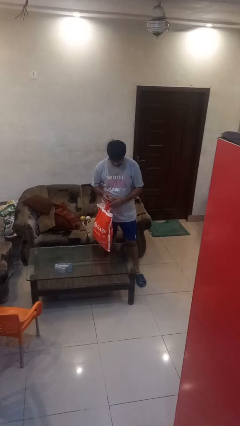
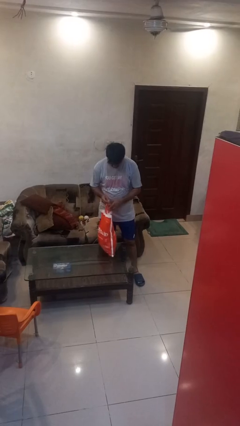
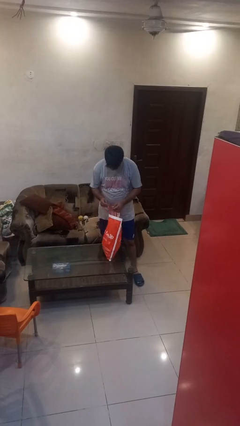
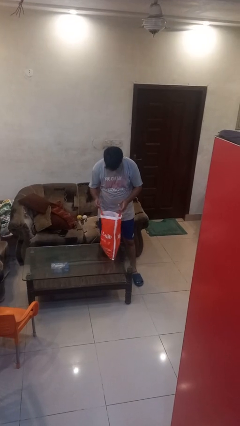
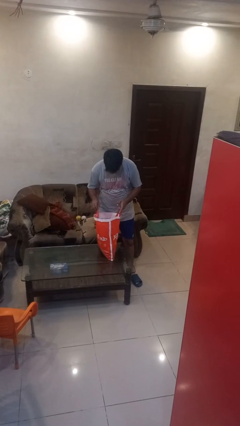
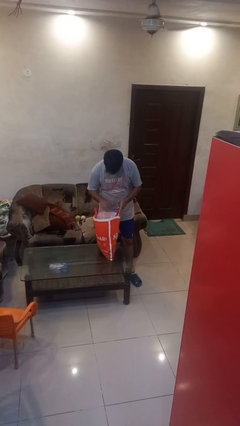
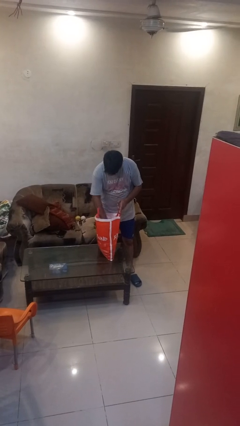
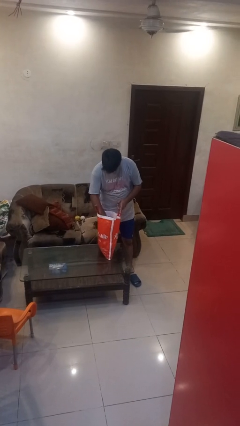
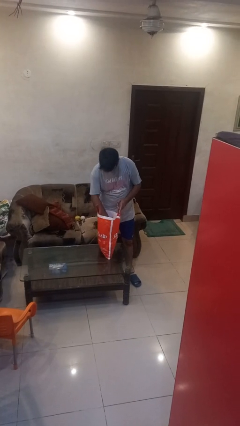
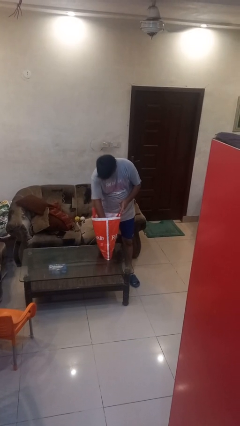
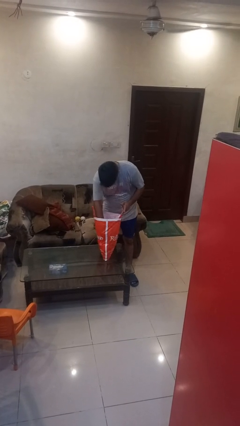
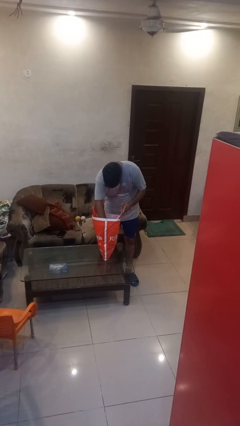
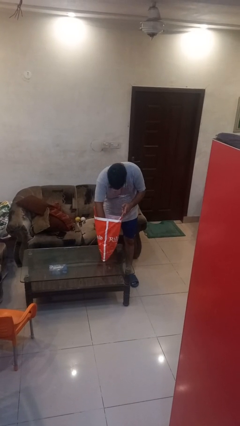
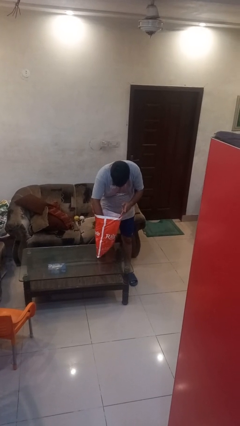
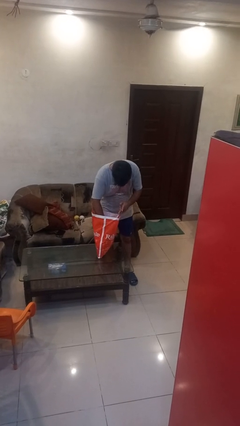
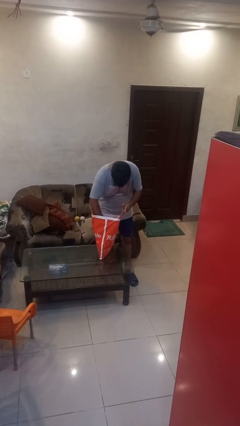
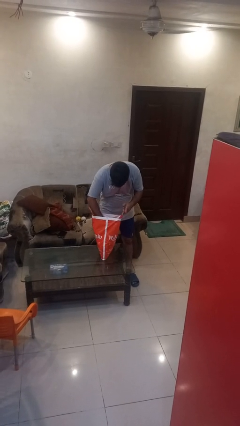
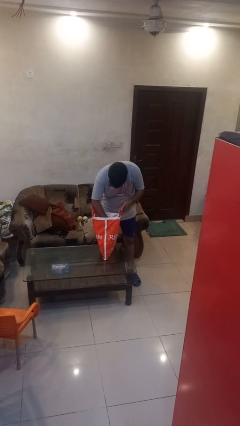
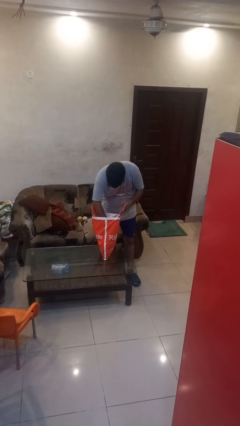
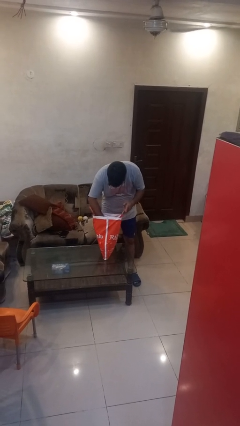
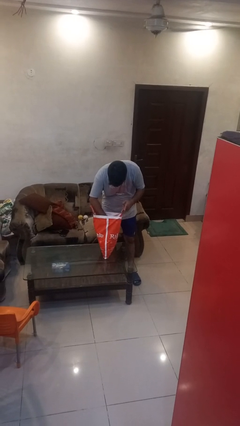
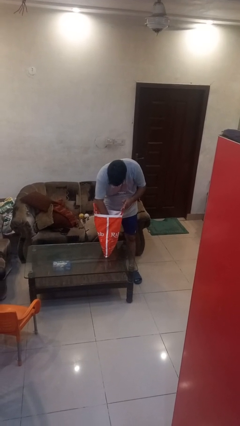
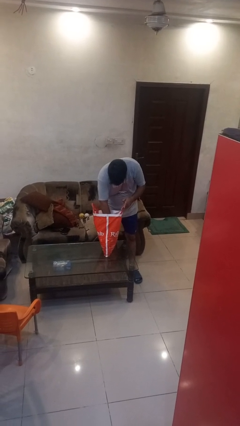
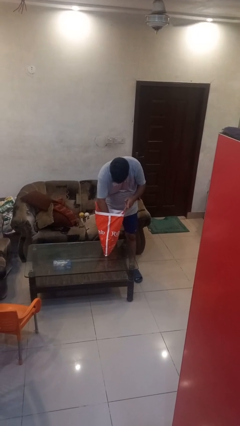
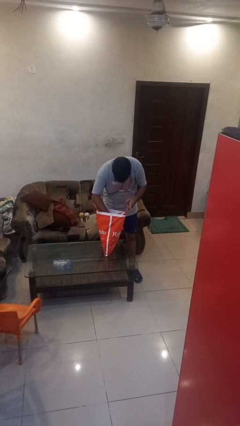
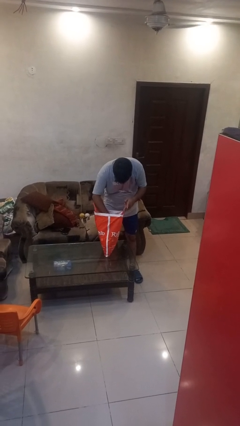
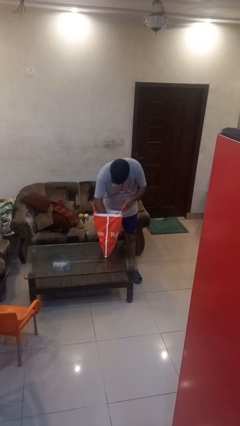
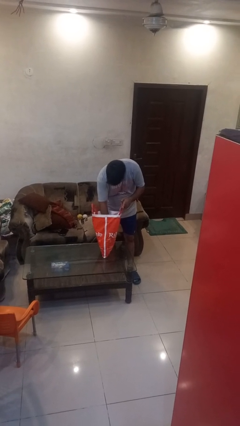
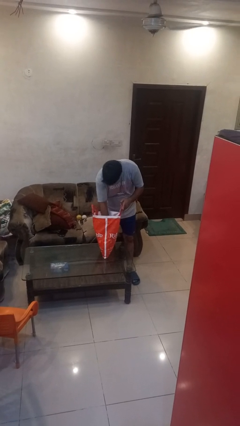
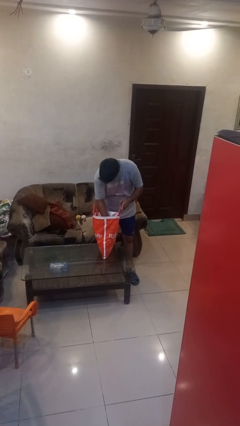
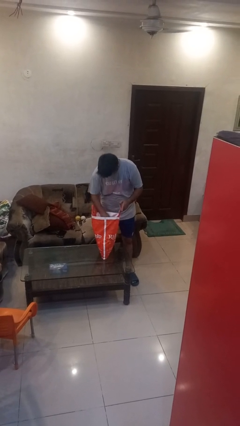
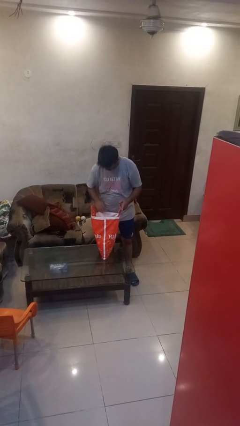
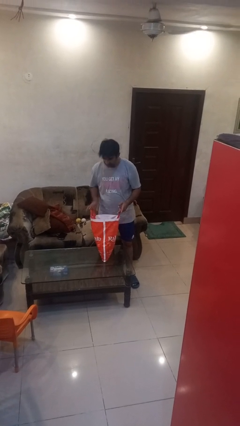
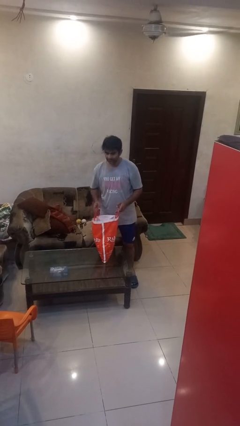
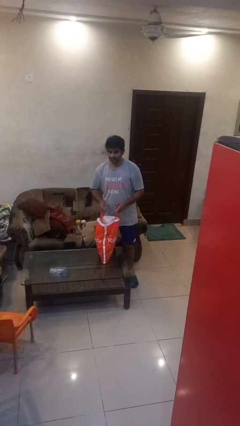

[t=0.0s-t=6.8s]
person searches in bag

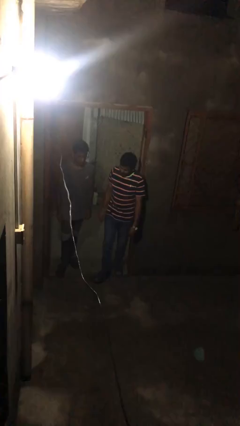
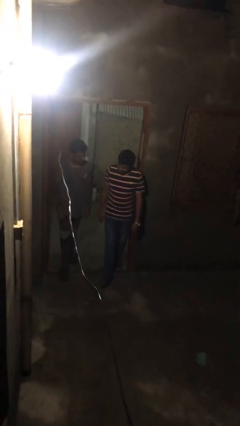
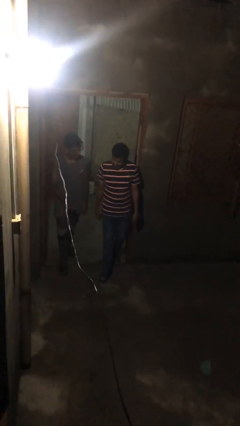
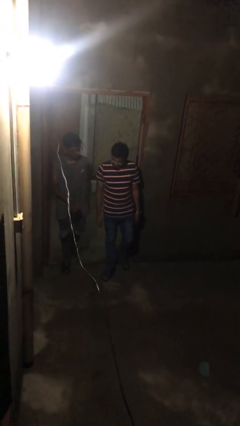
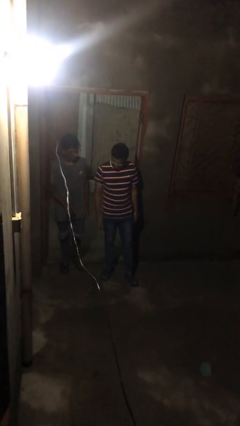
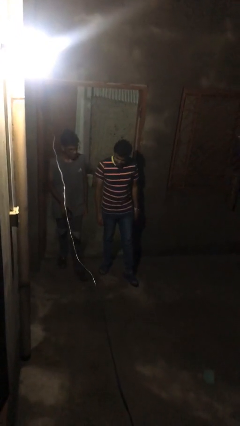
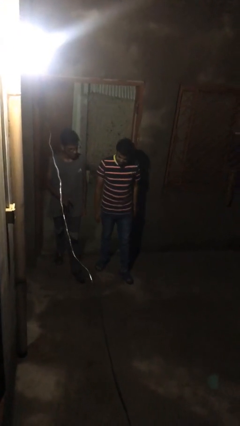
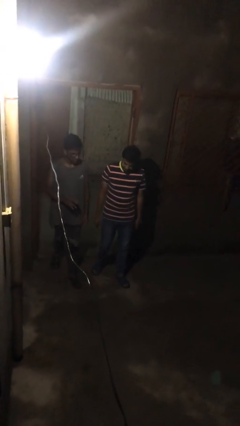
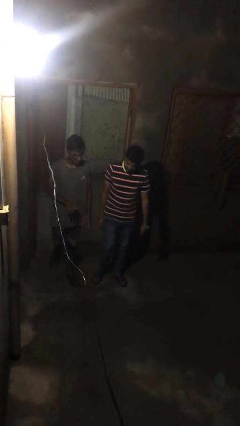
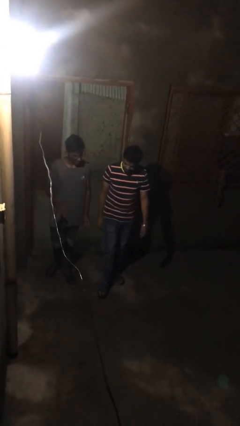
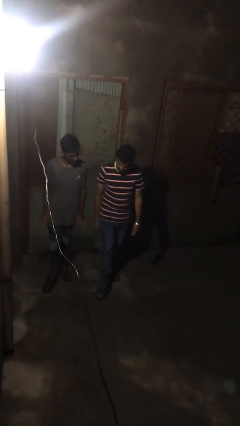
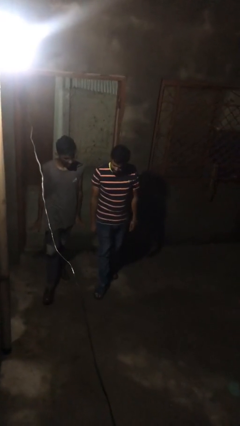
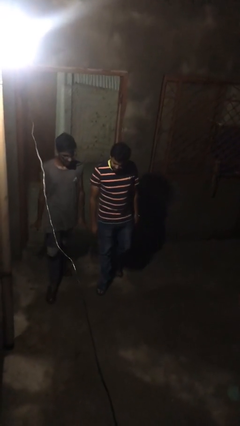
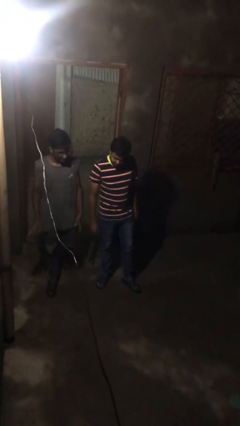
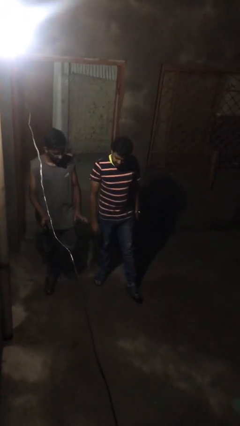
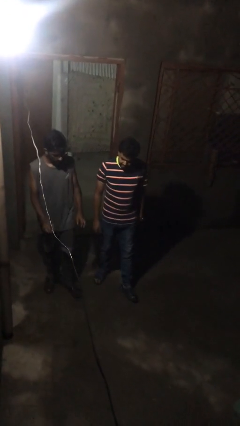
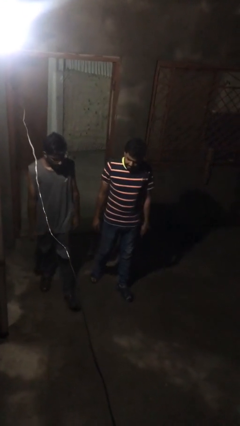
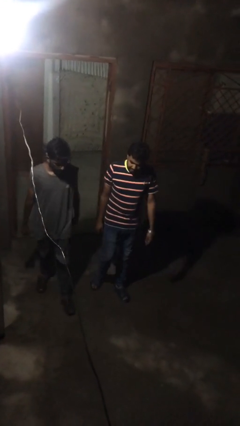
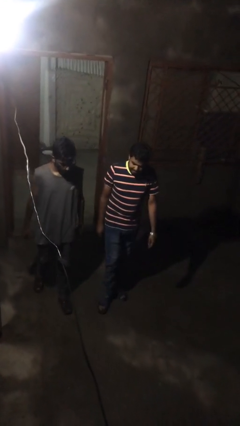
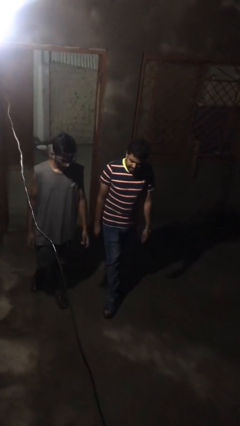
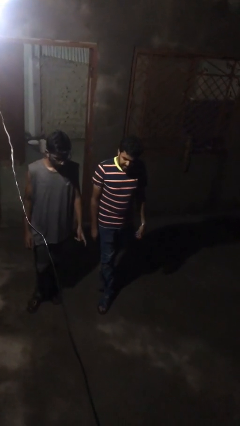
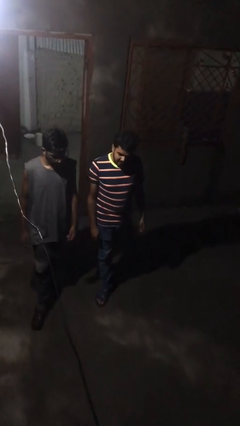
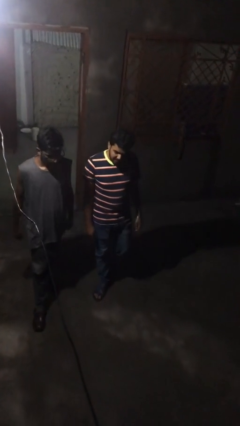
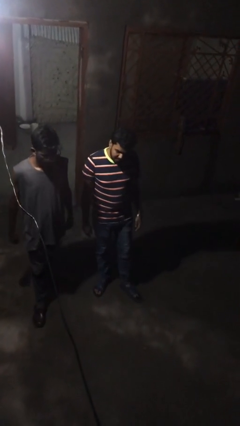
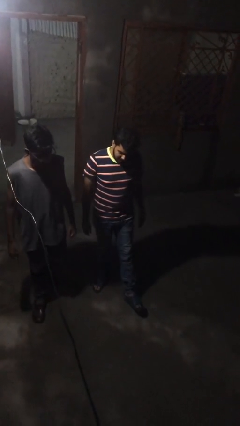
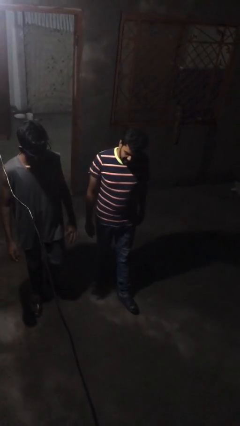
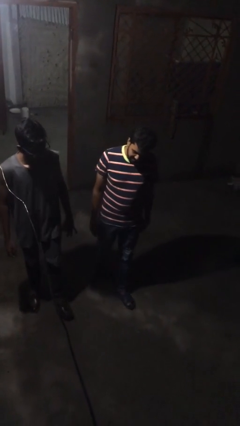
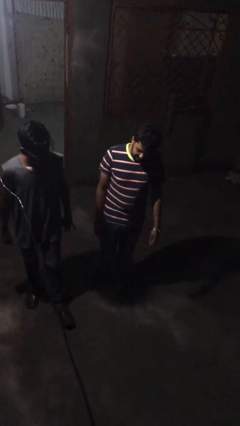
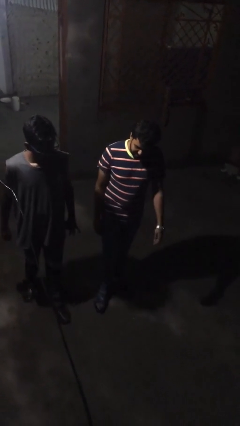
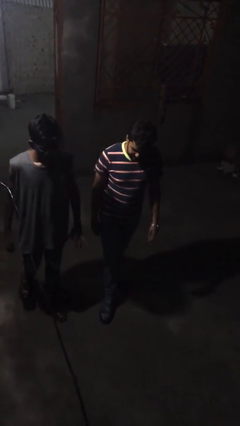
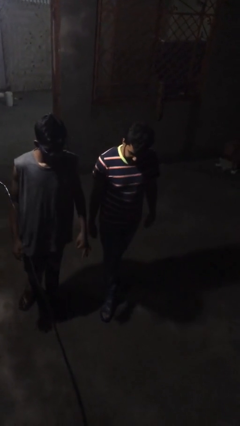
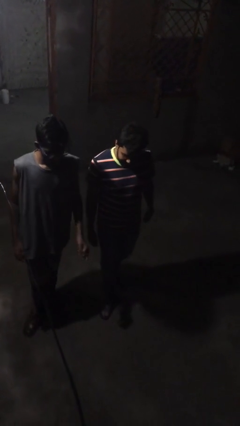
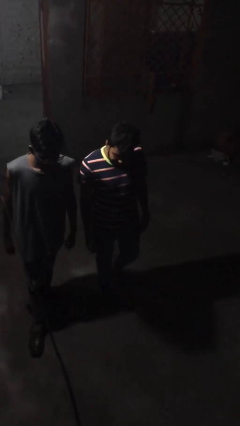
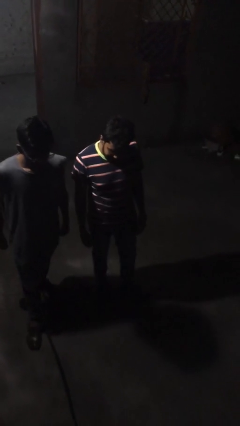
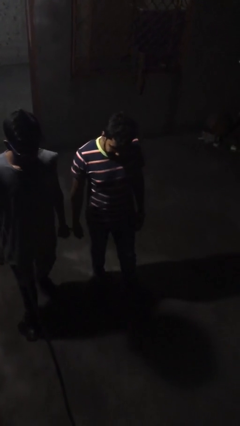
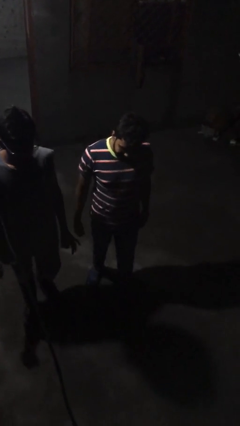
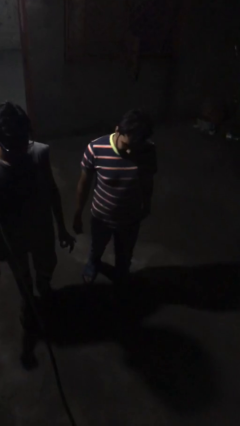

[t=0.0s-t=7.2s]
person talks to person

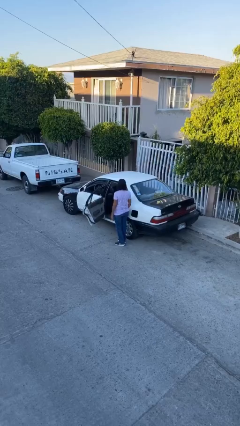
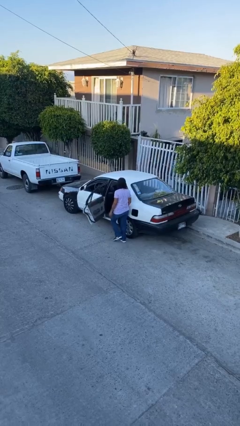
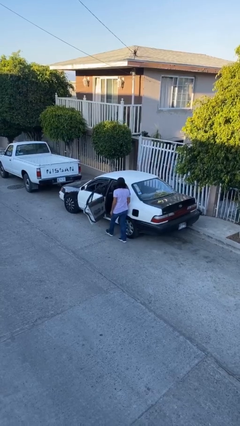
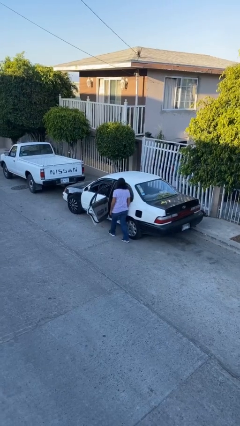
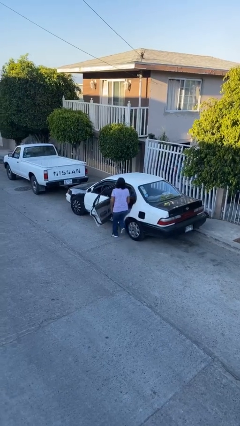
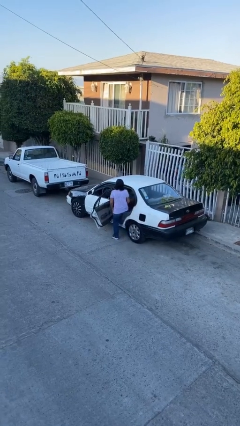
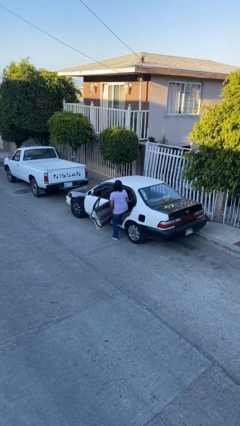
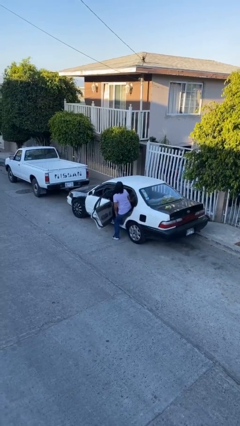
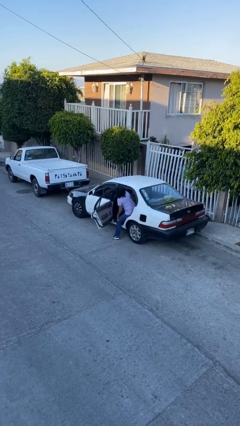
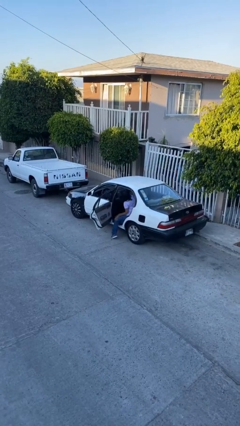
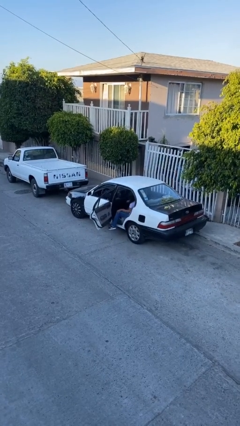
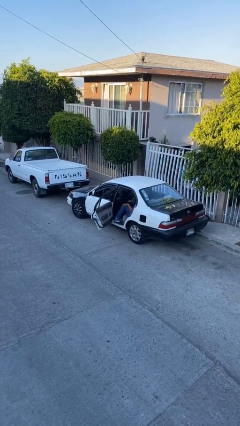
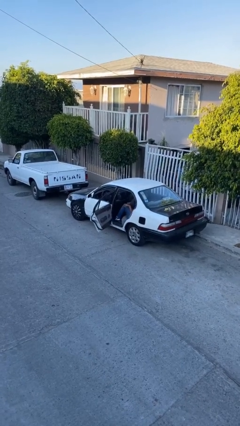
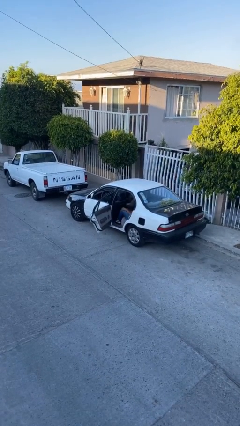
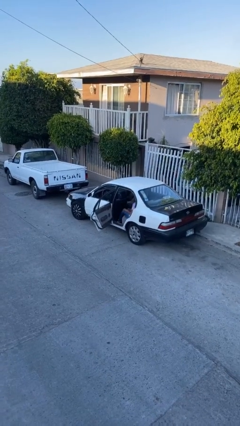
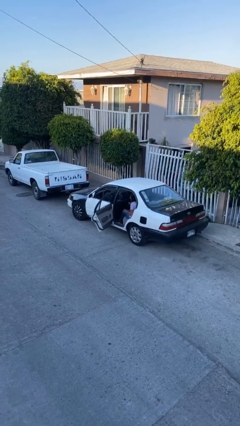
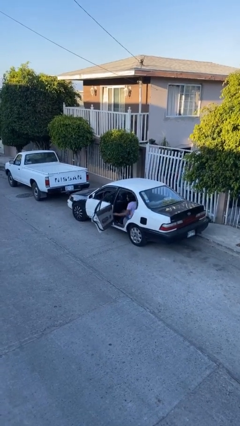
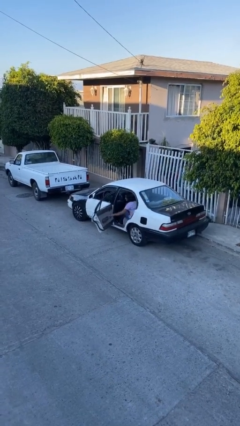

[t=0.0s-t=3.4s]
person enters car

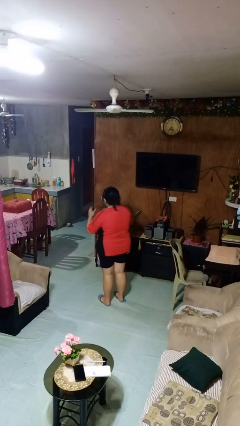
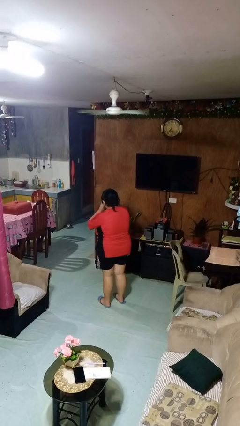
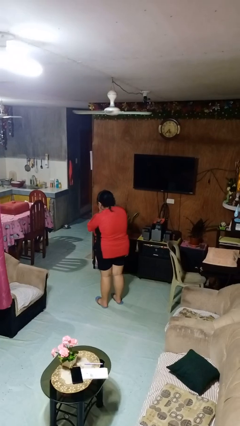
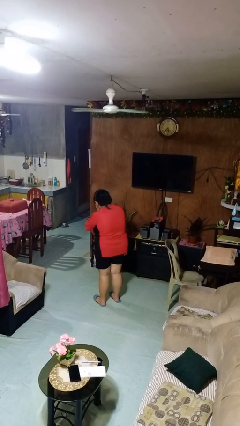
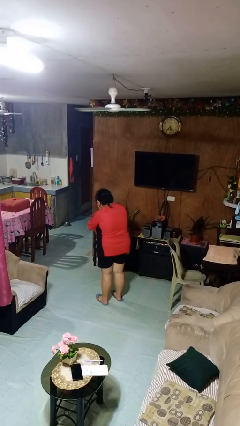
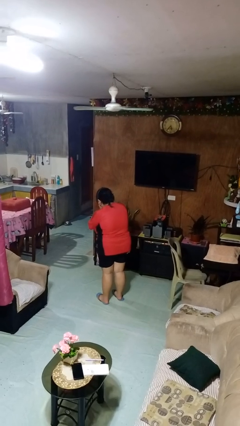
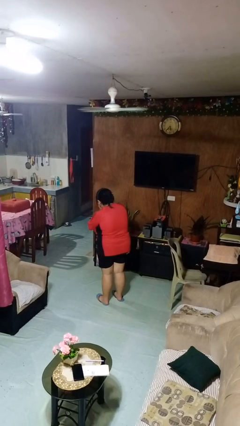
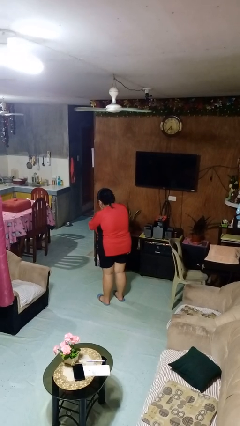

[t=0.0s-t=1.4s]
person sneezes into hand
